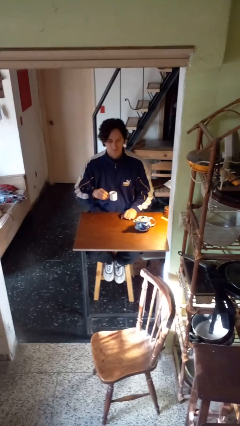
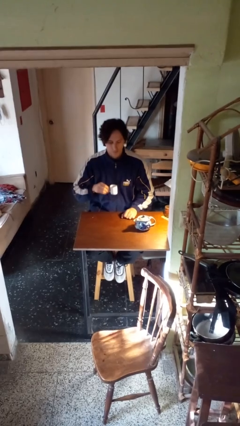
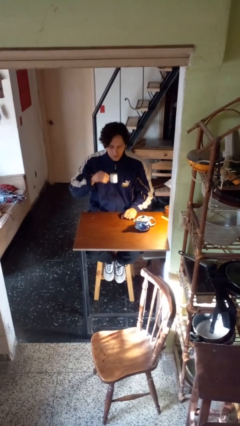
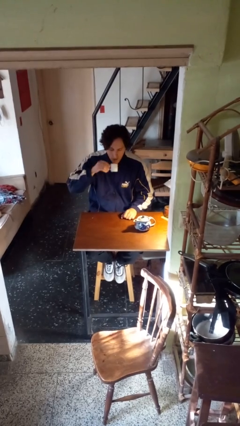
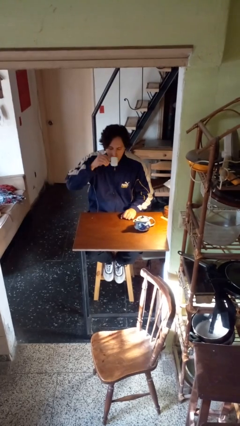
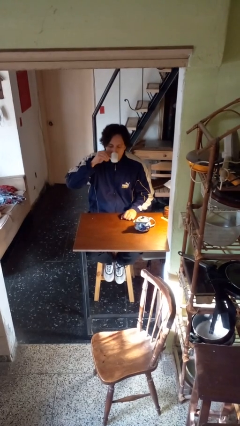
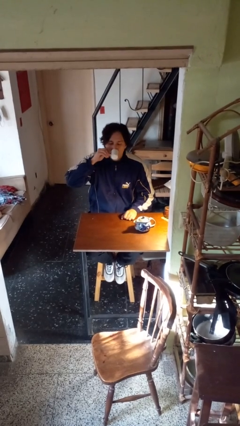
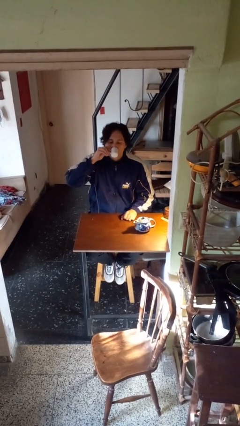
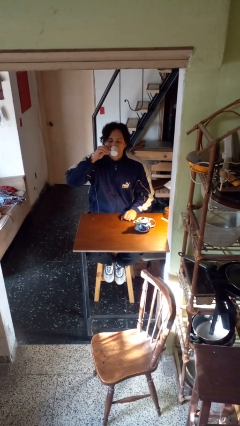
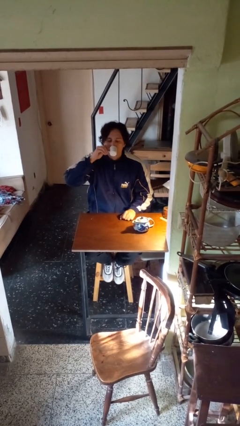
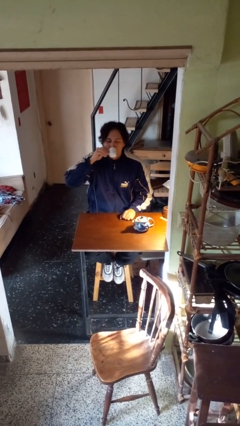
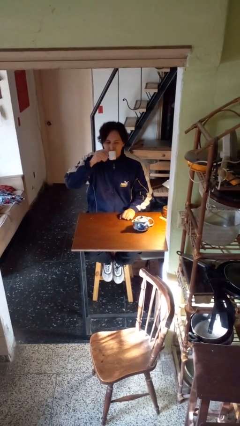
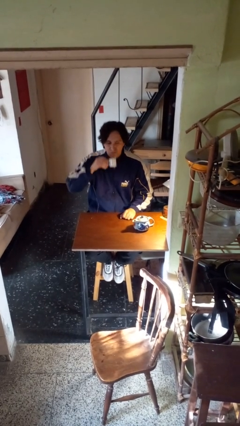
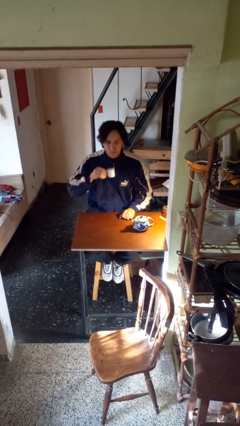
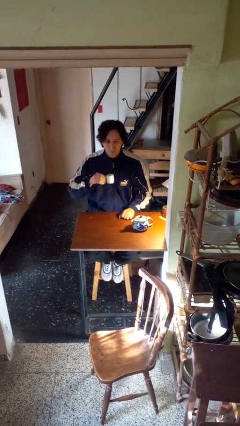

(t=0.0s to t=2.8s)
person drinks from mug

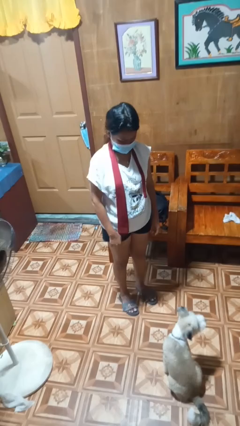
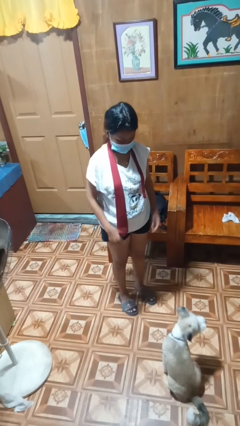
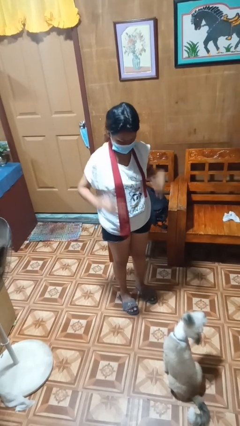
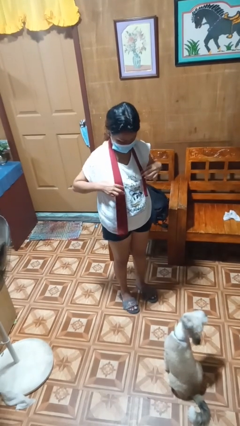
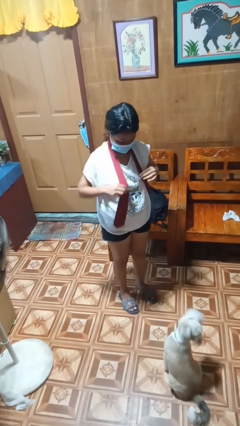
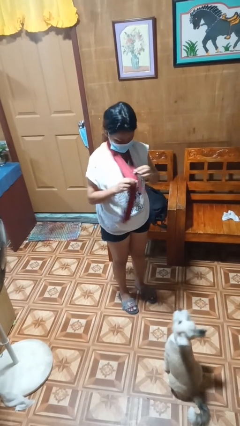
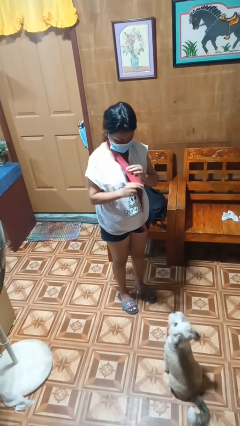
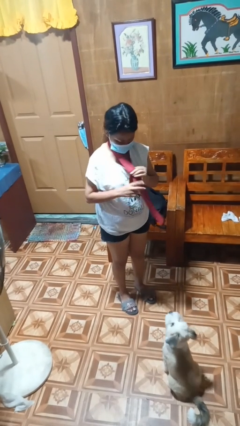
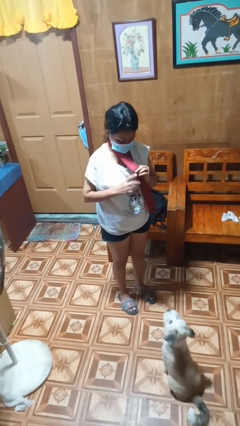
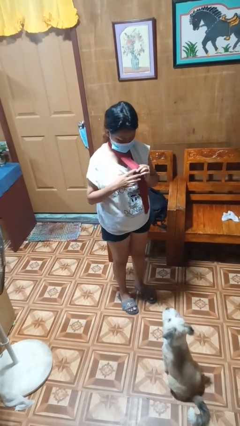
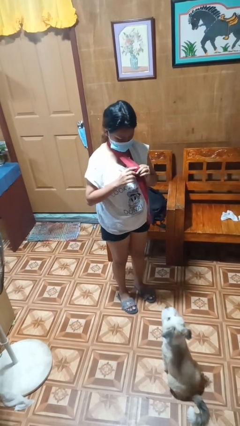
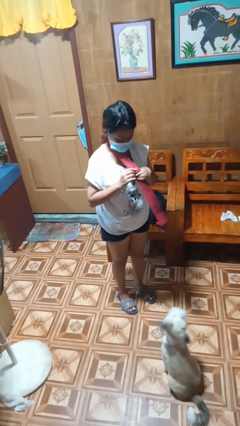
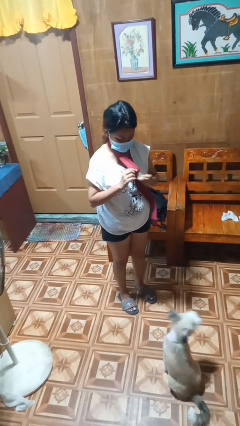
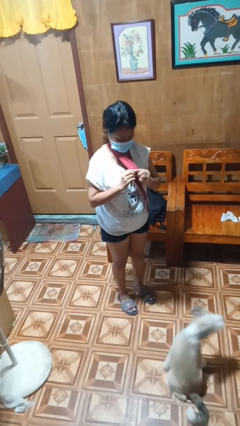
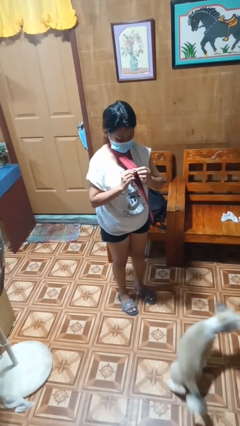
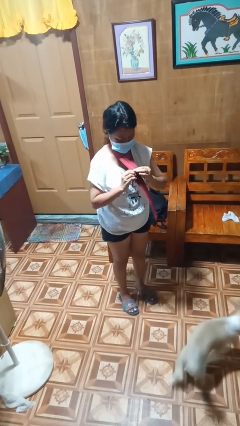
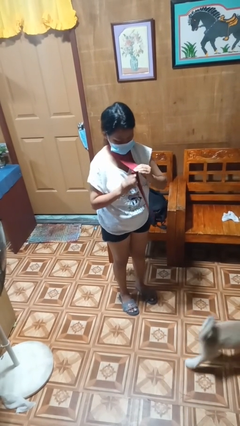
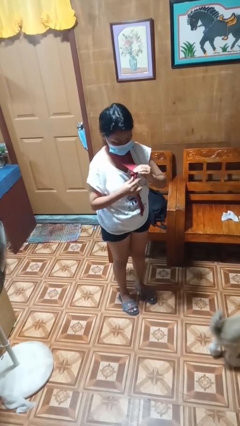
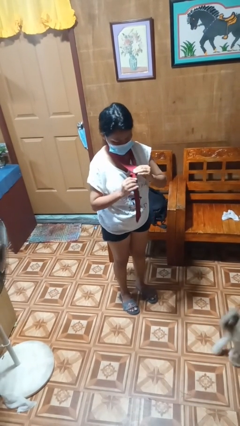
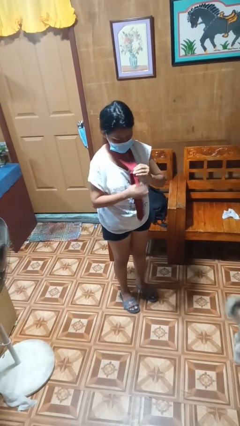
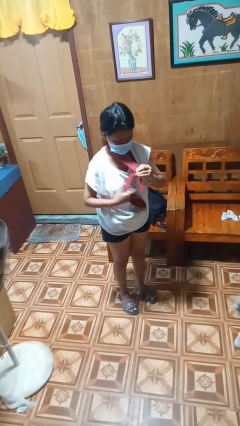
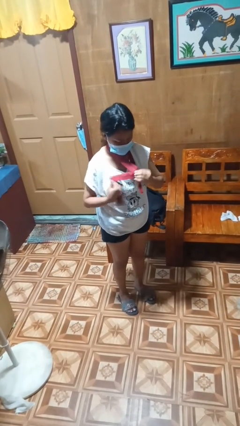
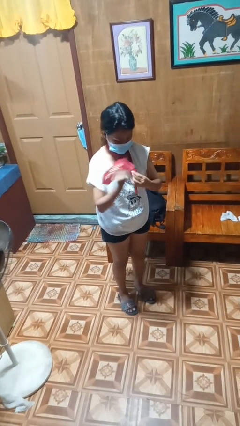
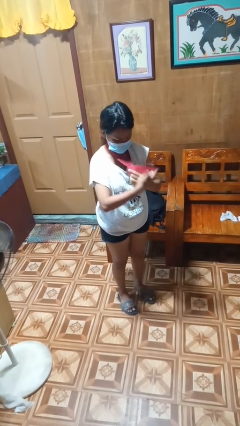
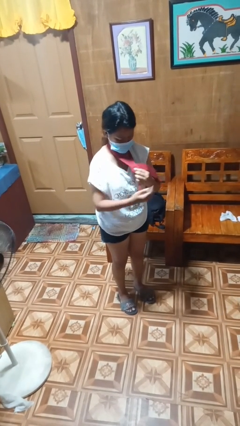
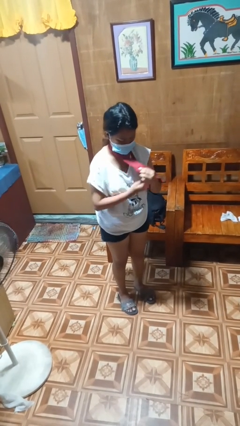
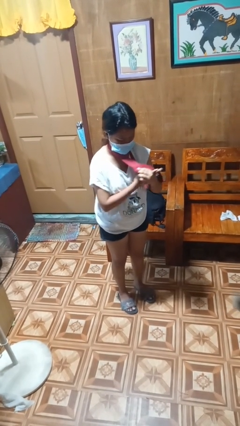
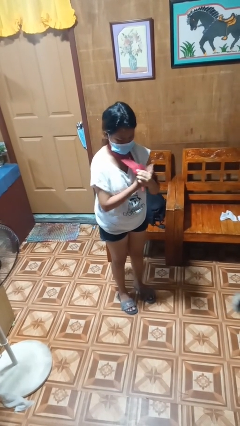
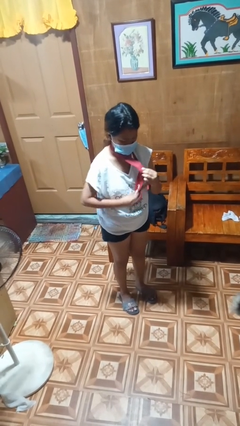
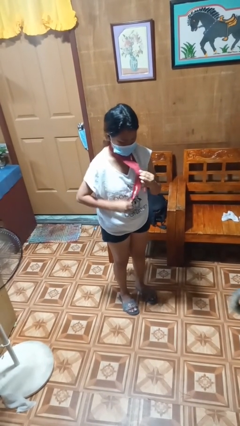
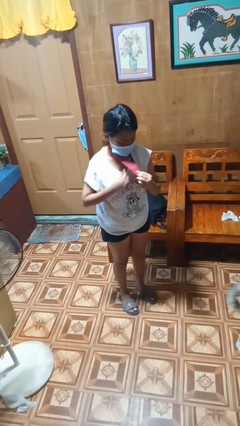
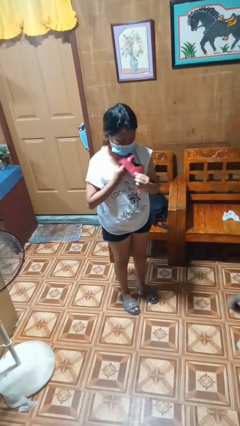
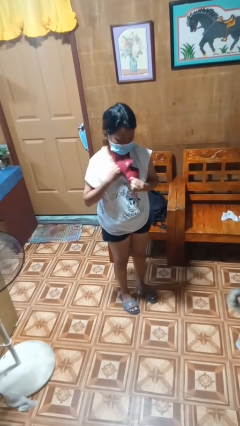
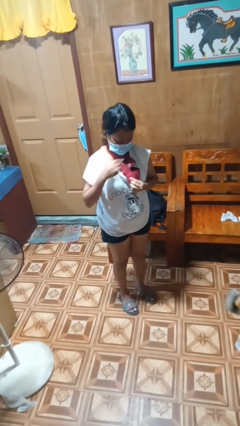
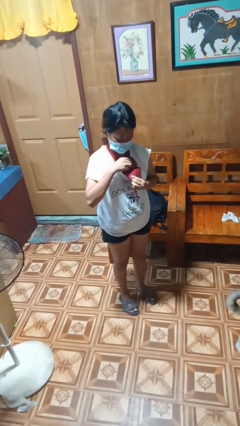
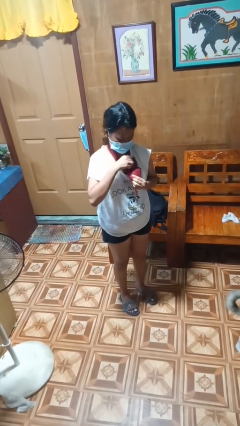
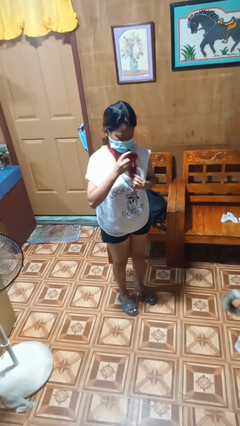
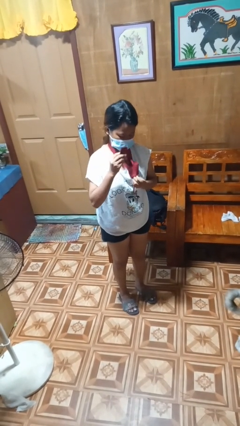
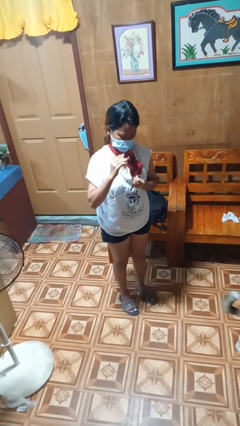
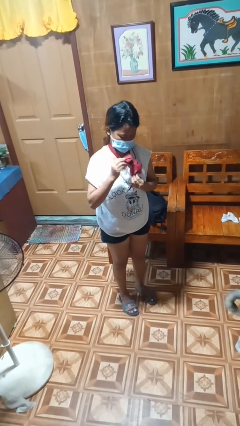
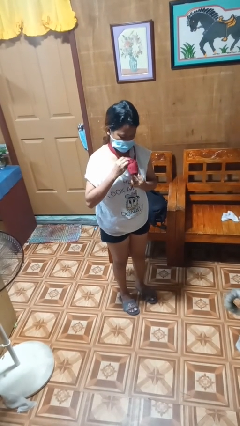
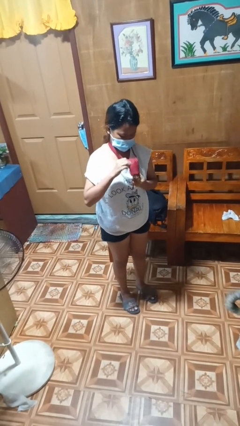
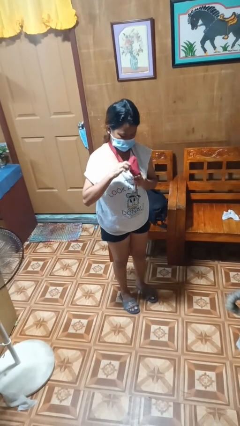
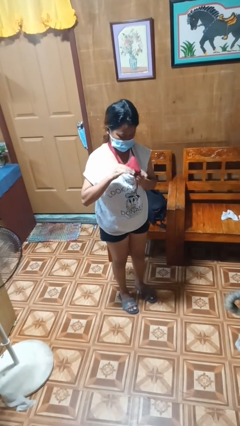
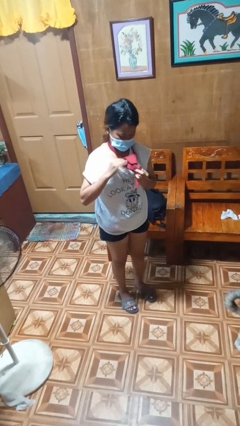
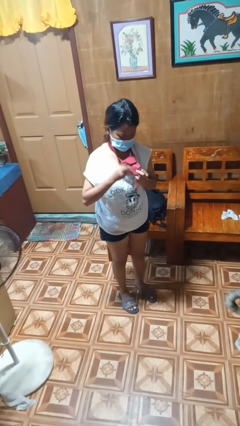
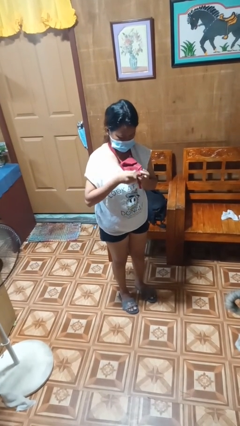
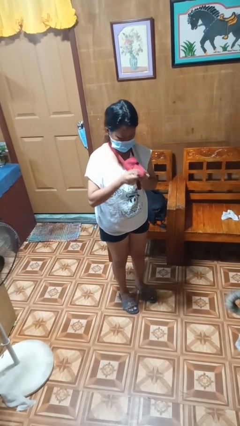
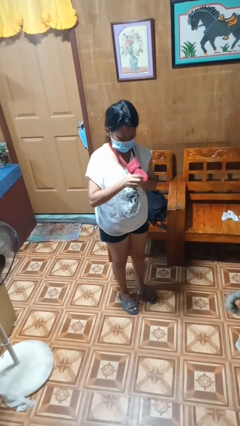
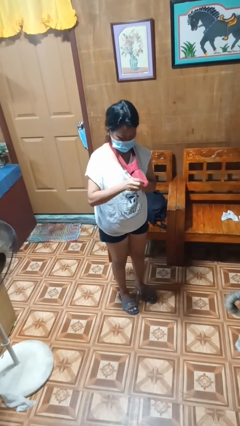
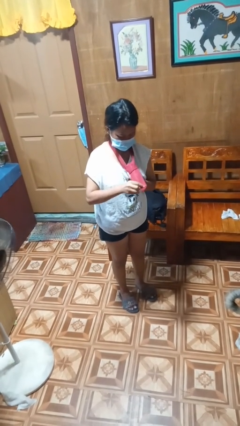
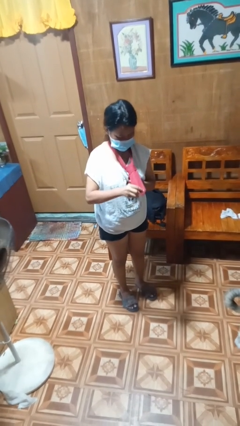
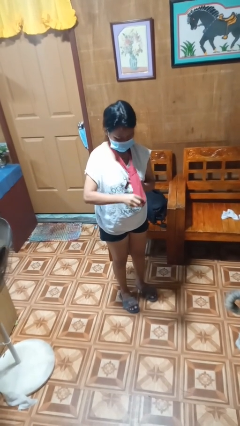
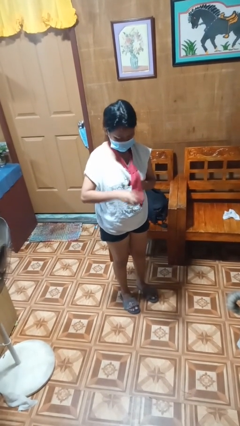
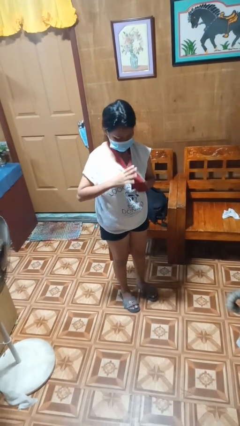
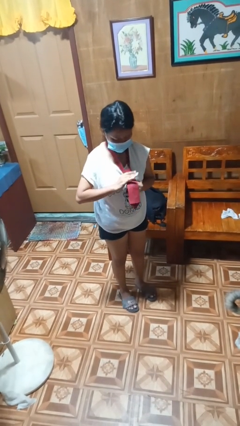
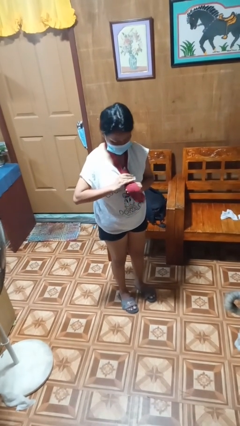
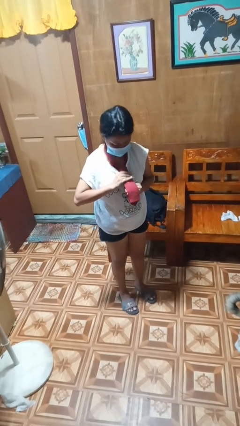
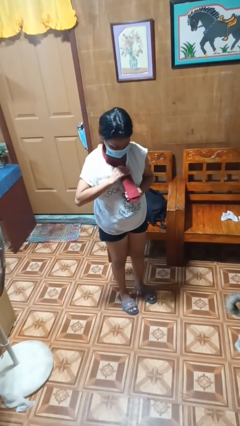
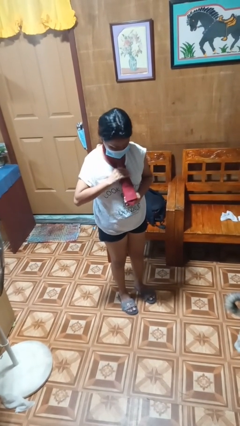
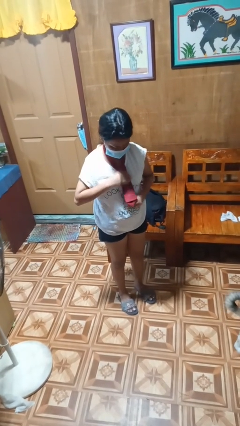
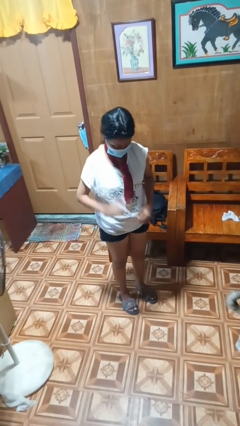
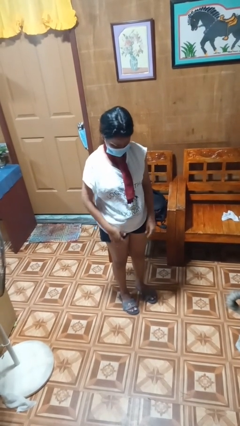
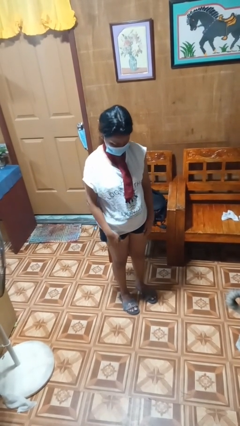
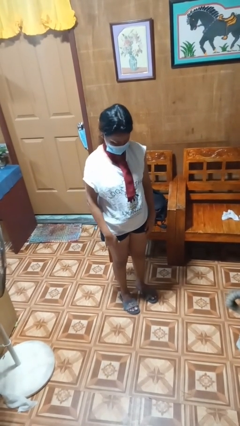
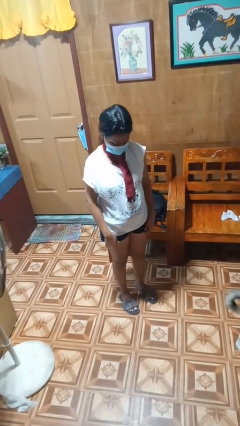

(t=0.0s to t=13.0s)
person puts on necktie

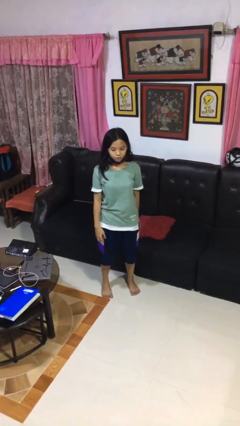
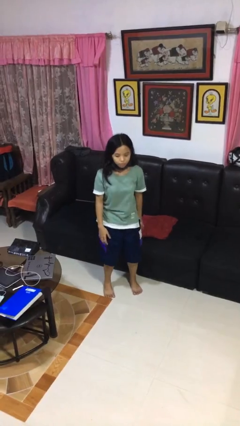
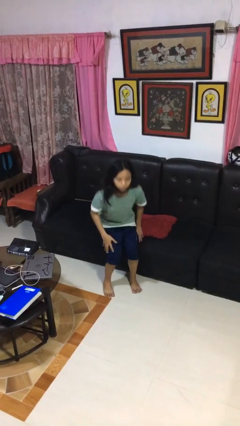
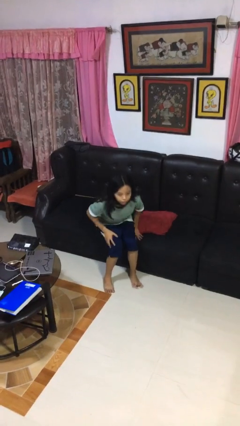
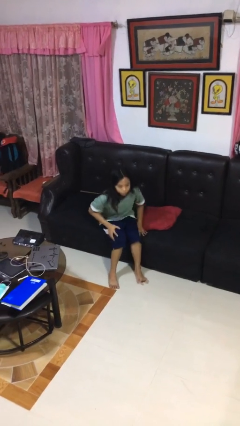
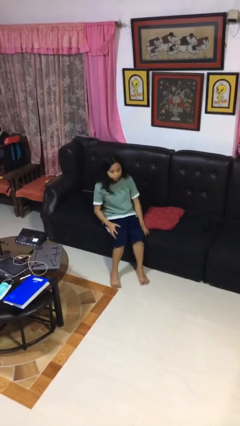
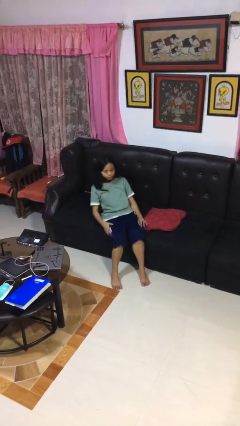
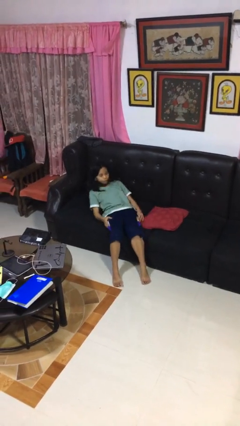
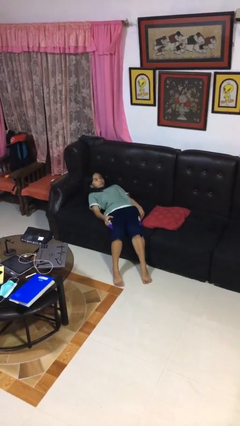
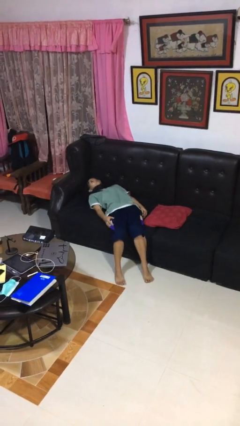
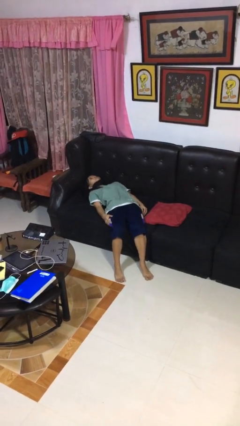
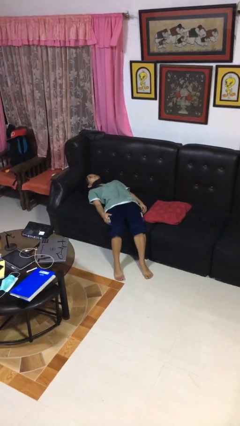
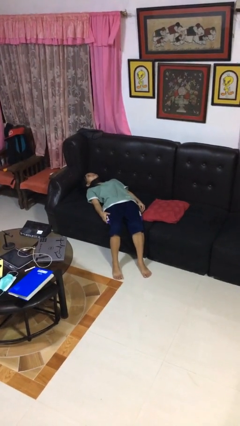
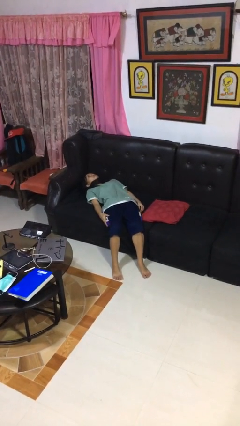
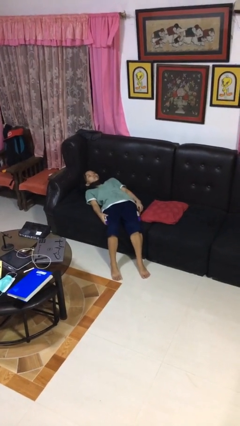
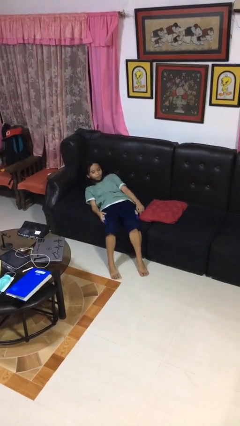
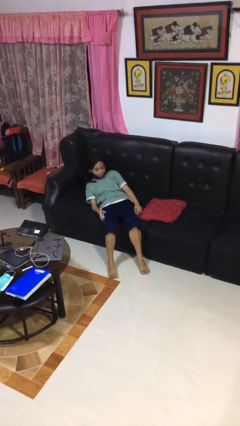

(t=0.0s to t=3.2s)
person lies down on couch
